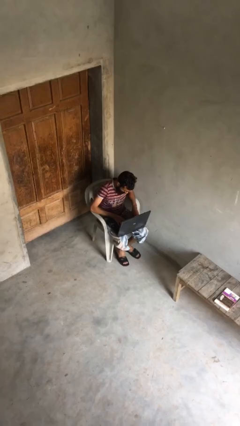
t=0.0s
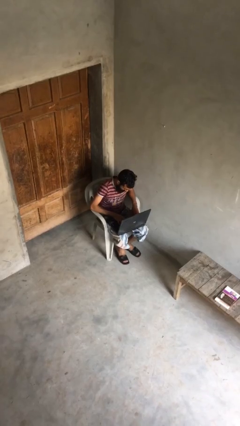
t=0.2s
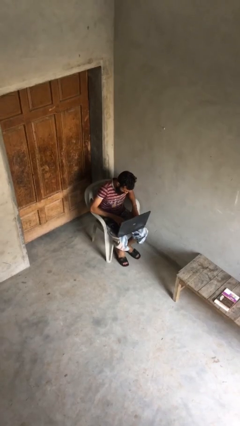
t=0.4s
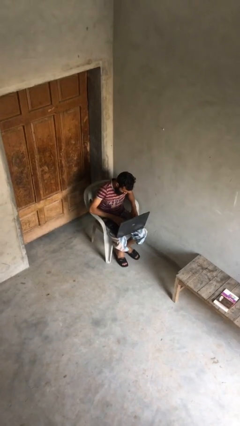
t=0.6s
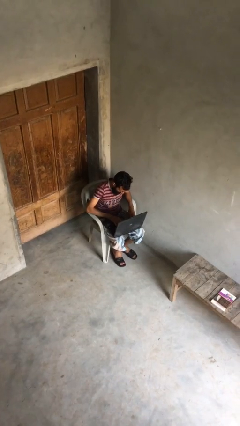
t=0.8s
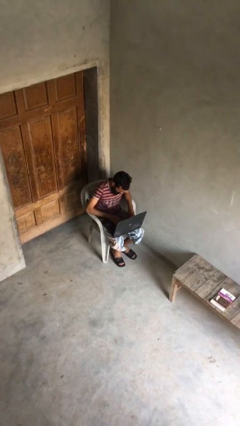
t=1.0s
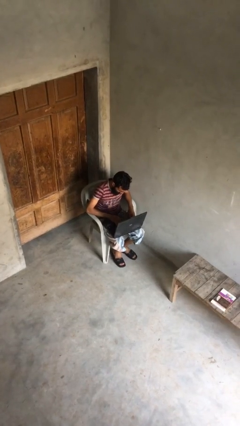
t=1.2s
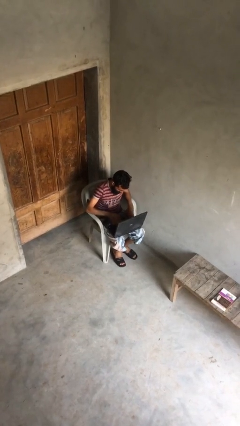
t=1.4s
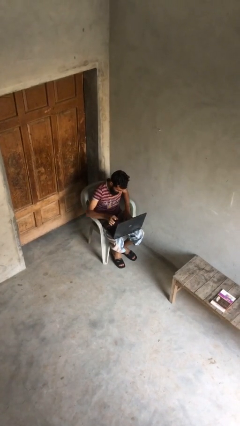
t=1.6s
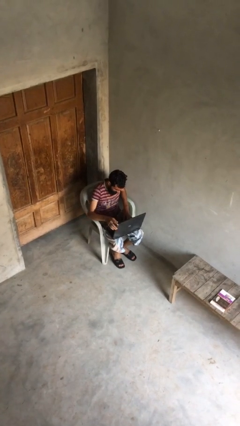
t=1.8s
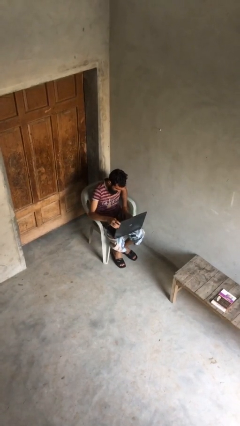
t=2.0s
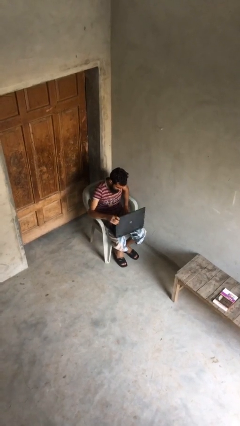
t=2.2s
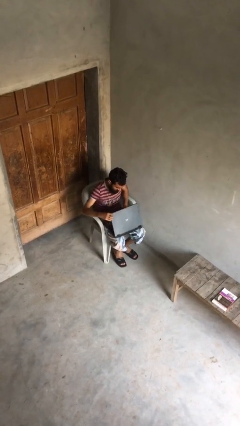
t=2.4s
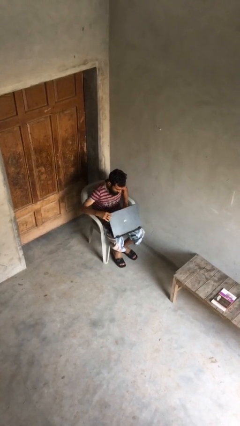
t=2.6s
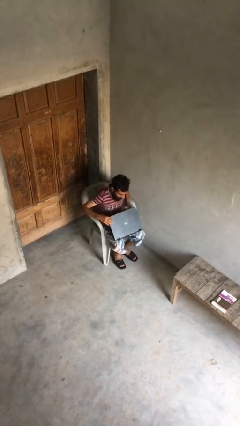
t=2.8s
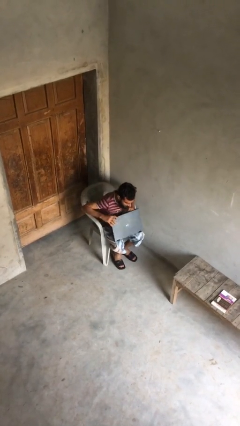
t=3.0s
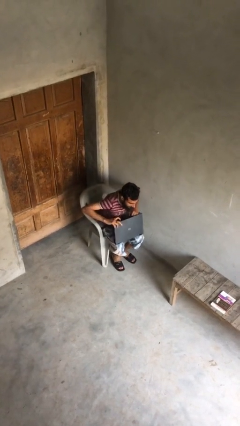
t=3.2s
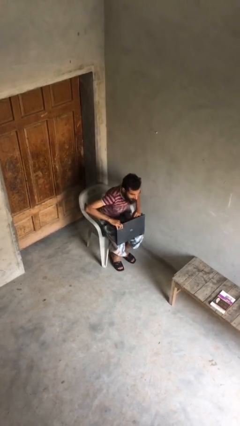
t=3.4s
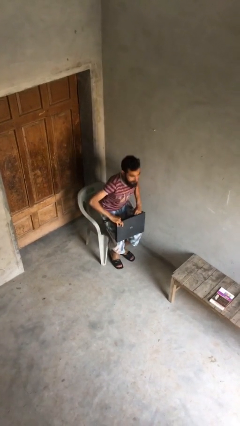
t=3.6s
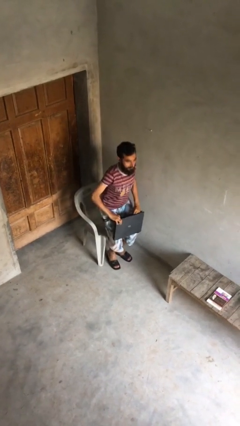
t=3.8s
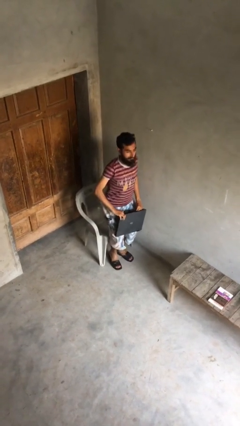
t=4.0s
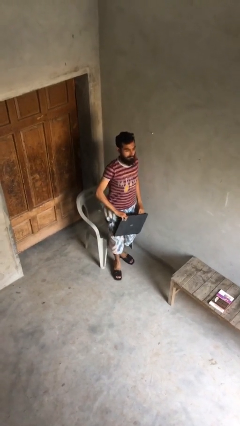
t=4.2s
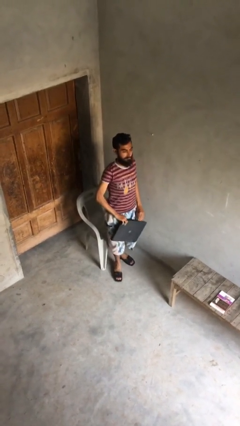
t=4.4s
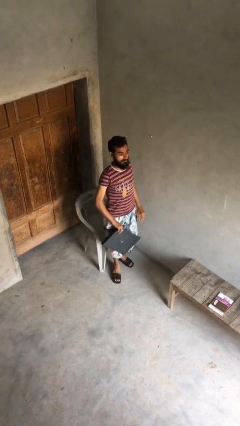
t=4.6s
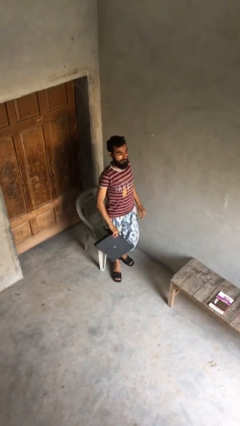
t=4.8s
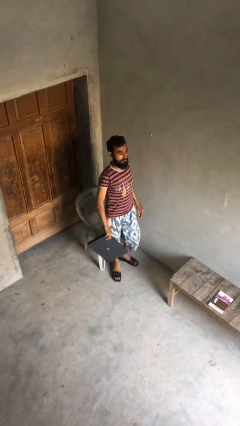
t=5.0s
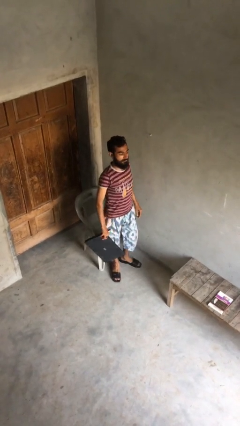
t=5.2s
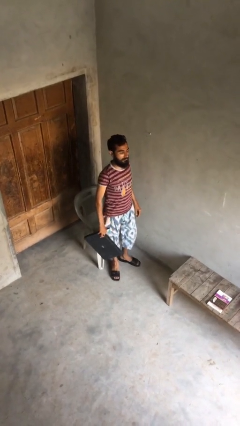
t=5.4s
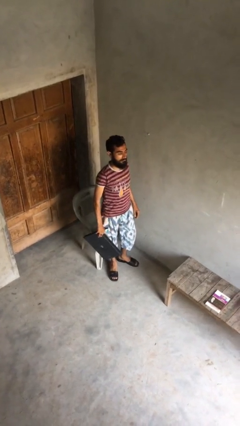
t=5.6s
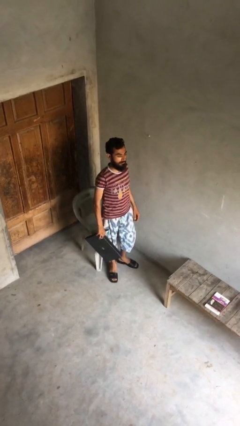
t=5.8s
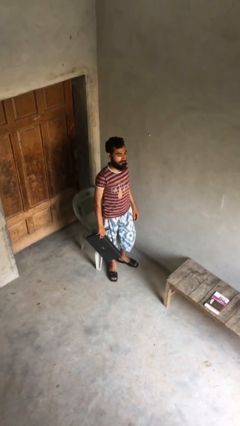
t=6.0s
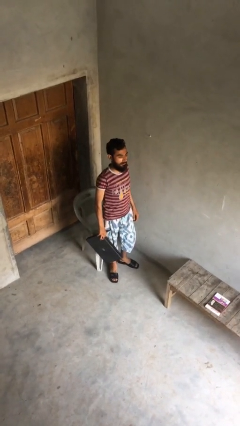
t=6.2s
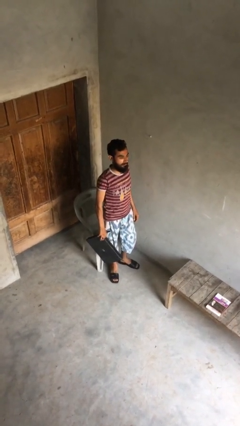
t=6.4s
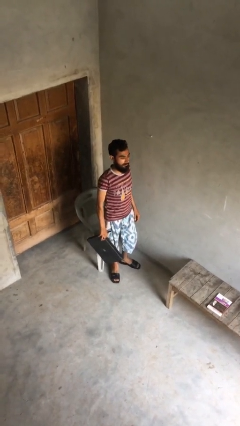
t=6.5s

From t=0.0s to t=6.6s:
person stands up

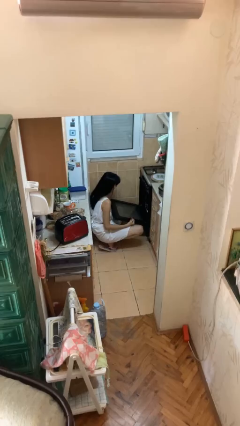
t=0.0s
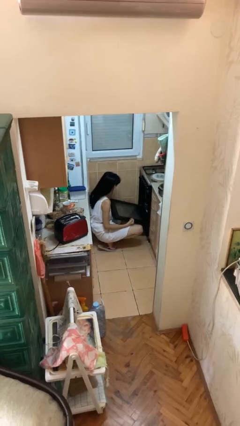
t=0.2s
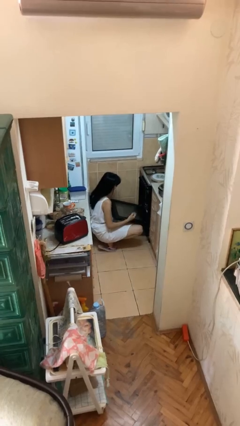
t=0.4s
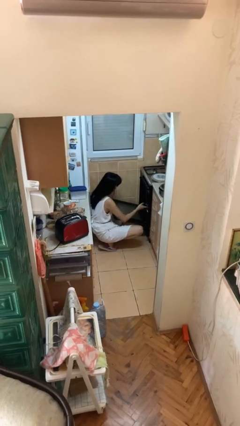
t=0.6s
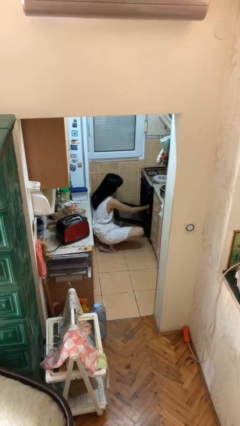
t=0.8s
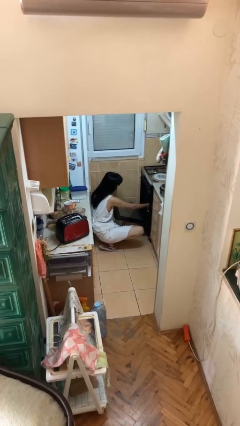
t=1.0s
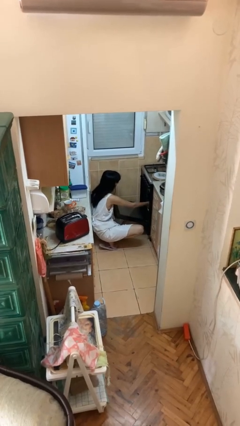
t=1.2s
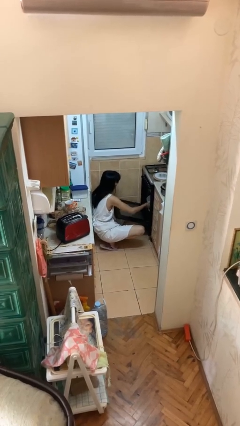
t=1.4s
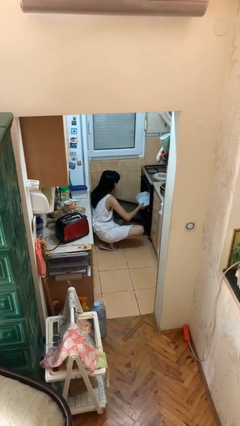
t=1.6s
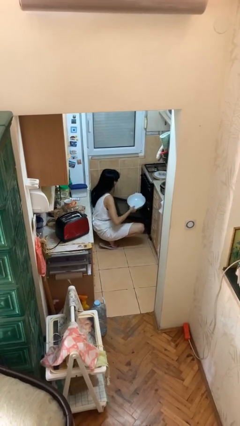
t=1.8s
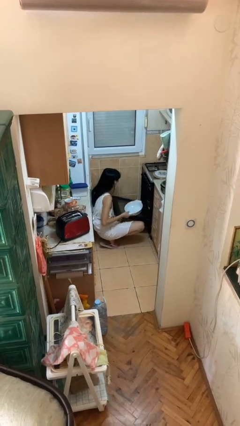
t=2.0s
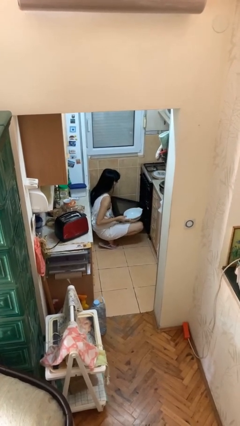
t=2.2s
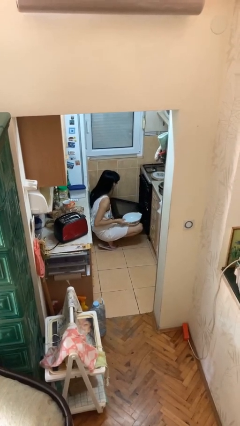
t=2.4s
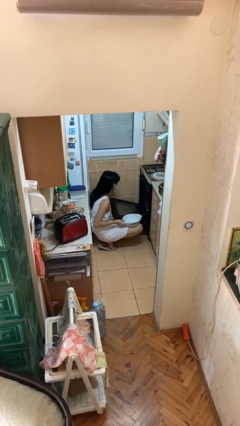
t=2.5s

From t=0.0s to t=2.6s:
person takes object from oven

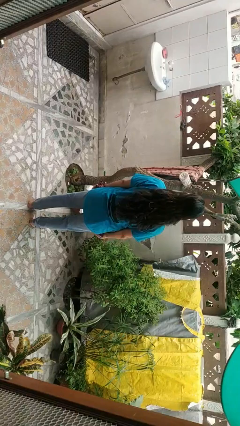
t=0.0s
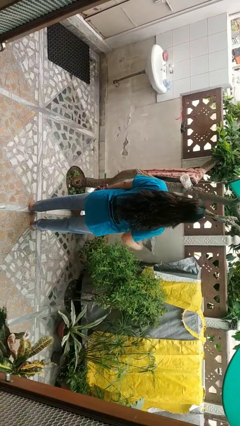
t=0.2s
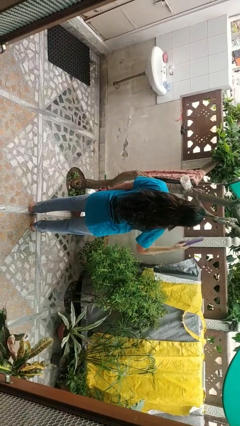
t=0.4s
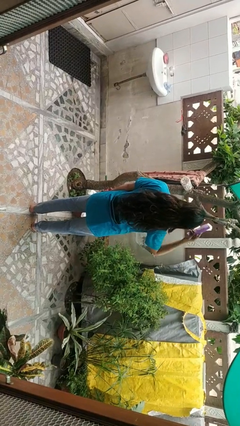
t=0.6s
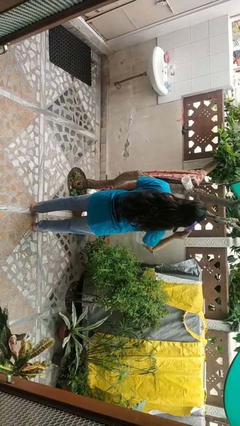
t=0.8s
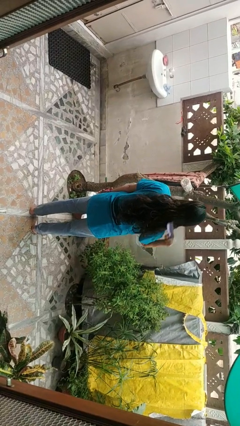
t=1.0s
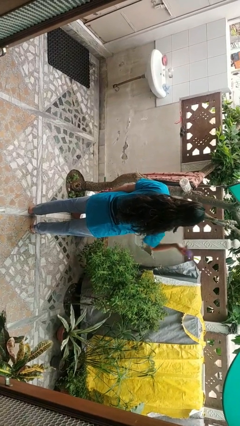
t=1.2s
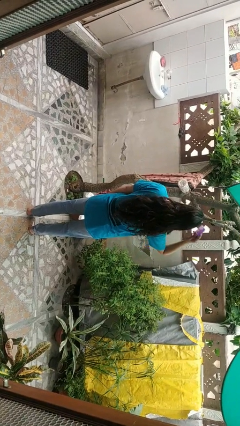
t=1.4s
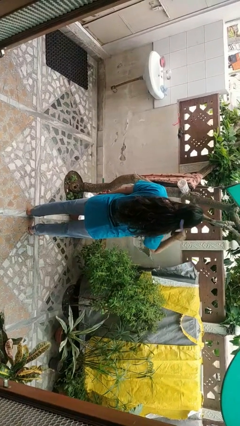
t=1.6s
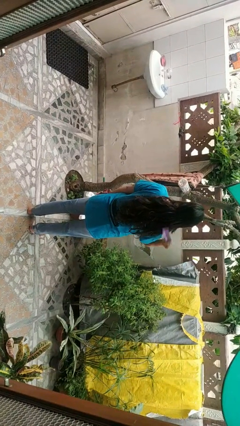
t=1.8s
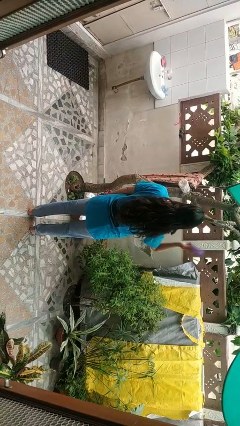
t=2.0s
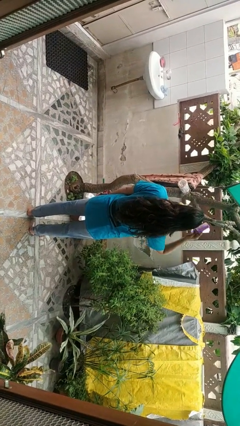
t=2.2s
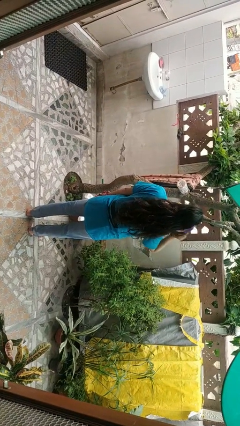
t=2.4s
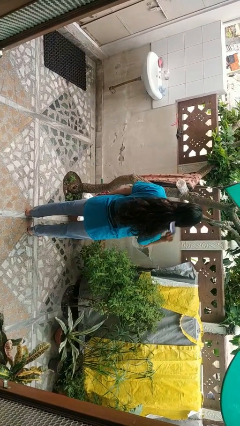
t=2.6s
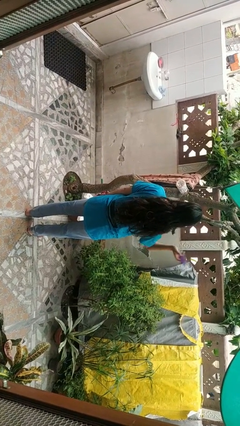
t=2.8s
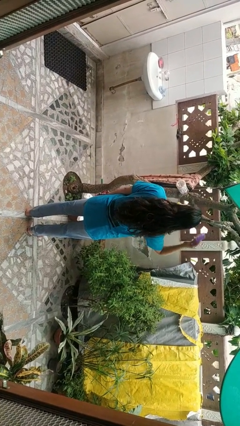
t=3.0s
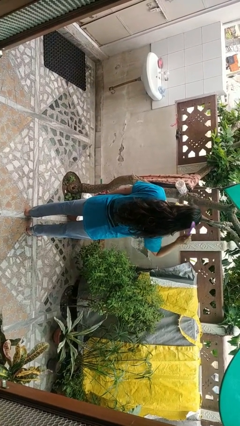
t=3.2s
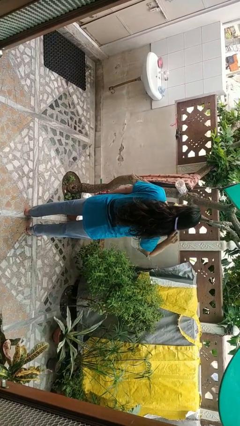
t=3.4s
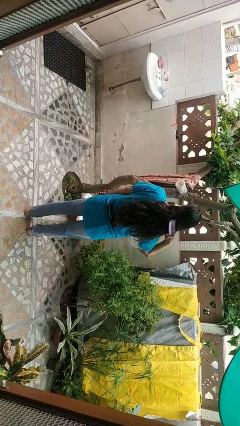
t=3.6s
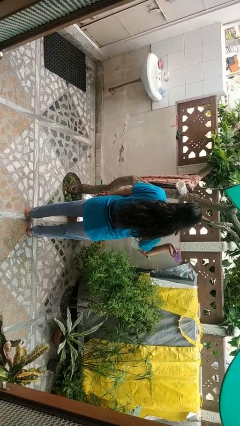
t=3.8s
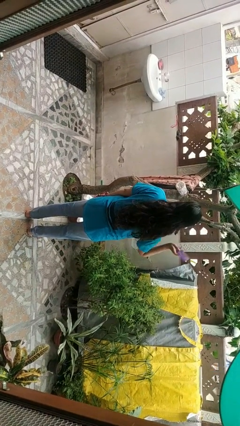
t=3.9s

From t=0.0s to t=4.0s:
person brushes hair

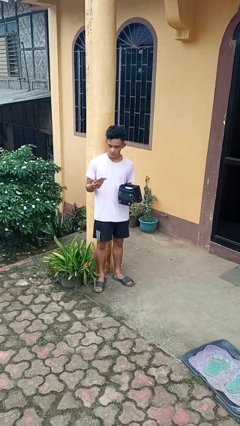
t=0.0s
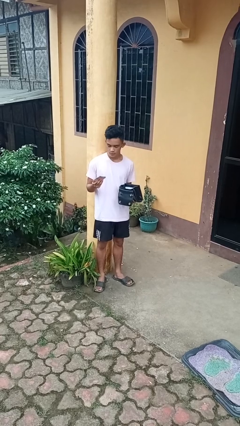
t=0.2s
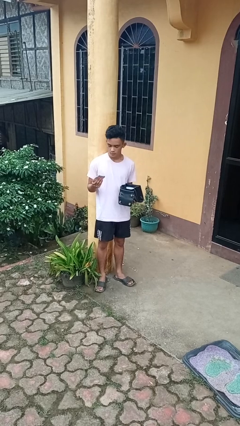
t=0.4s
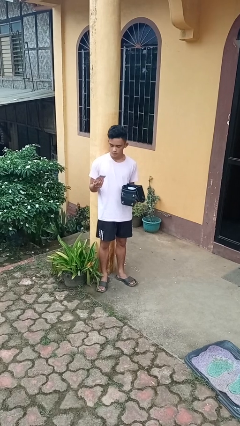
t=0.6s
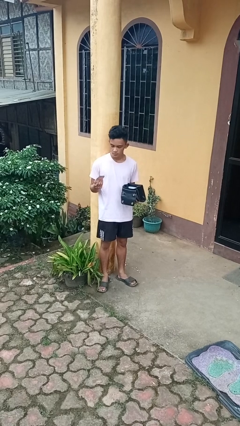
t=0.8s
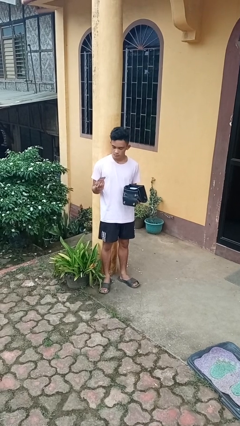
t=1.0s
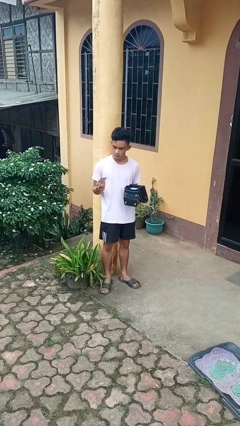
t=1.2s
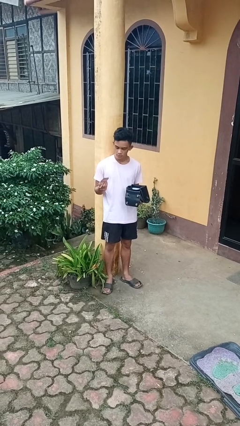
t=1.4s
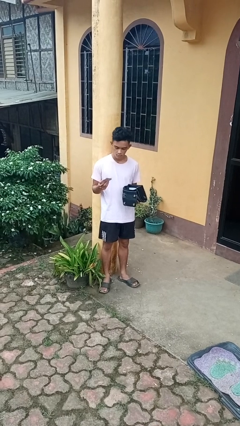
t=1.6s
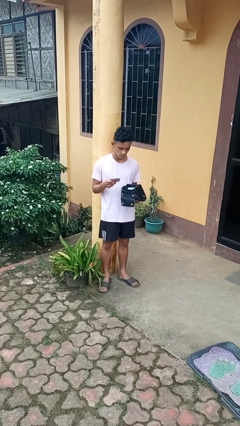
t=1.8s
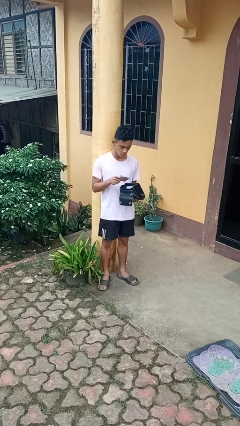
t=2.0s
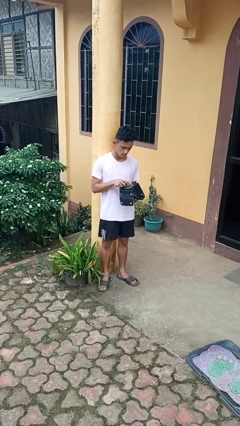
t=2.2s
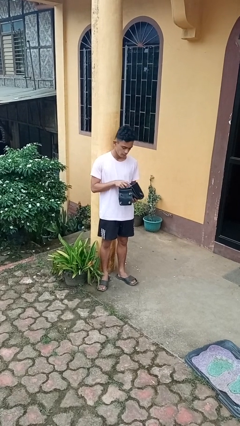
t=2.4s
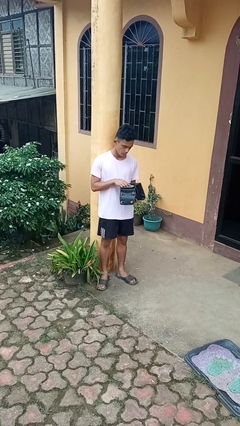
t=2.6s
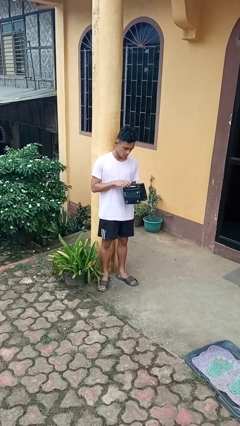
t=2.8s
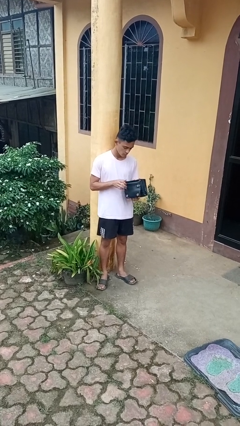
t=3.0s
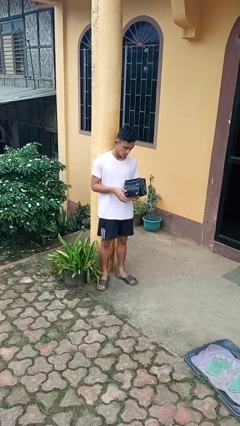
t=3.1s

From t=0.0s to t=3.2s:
person takes object from purse

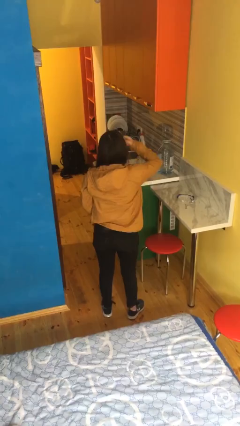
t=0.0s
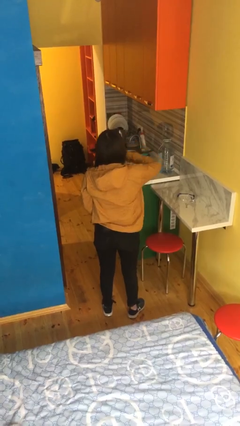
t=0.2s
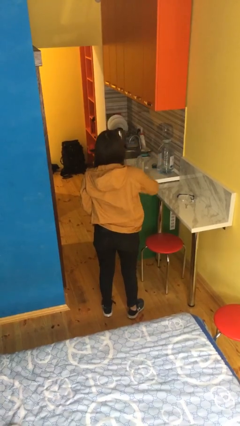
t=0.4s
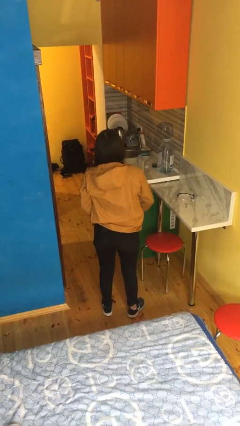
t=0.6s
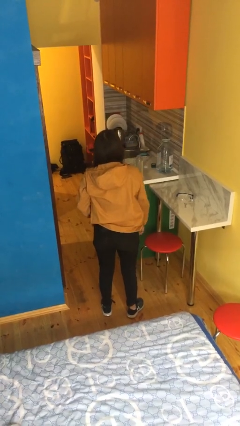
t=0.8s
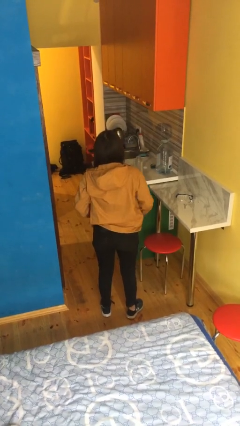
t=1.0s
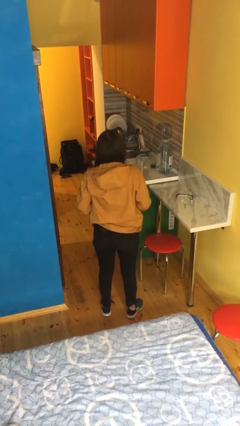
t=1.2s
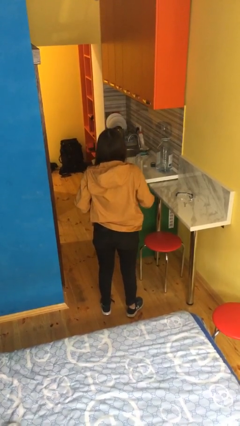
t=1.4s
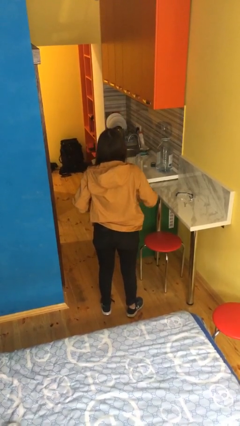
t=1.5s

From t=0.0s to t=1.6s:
person unzips jacket
